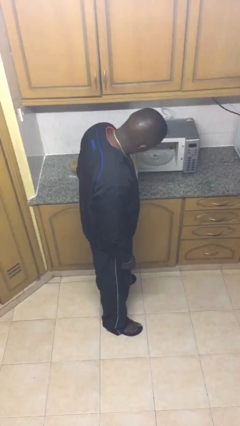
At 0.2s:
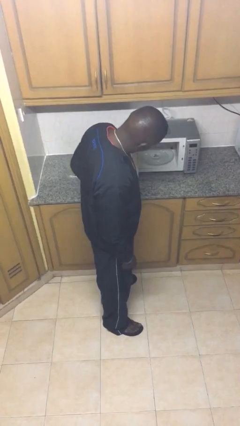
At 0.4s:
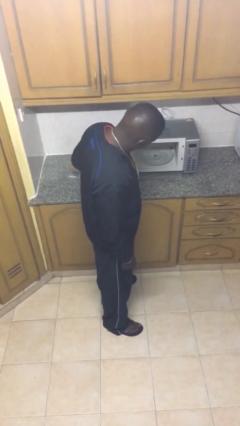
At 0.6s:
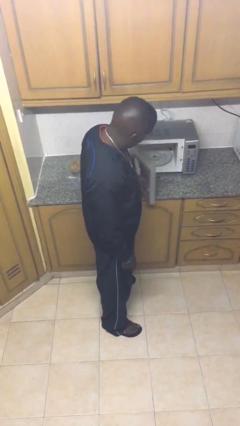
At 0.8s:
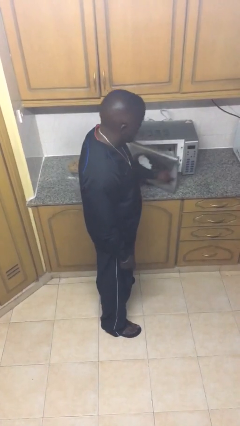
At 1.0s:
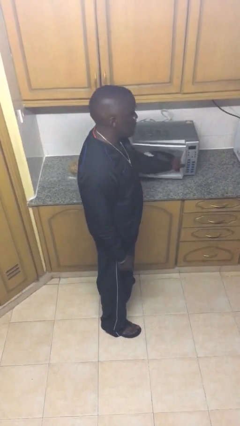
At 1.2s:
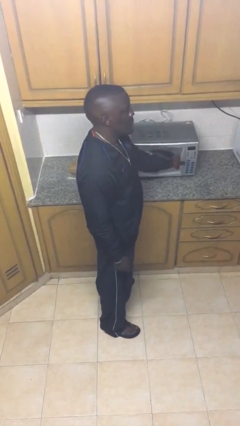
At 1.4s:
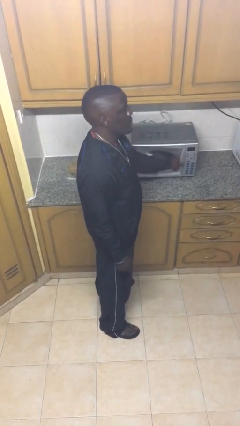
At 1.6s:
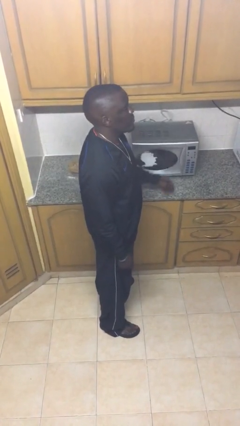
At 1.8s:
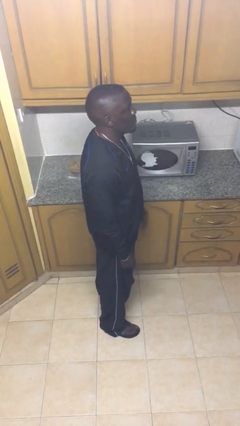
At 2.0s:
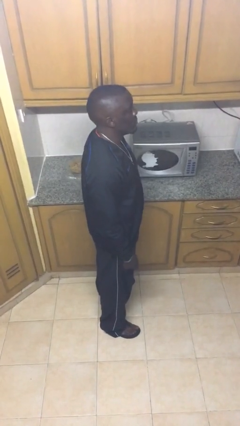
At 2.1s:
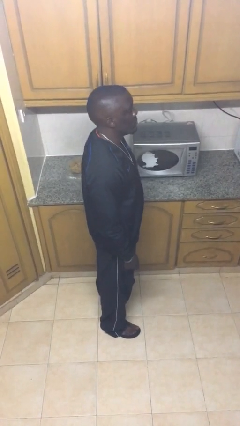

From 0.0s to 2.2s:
person closes microwave

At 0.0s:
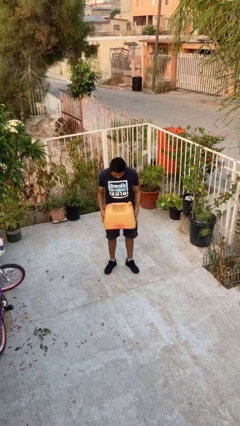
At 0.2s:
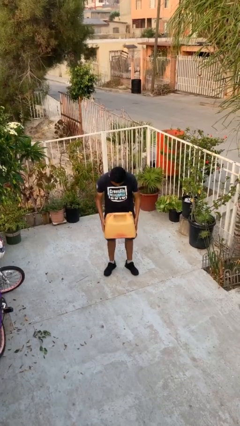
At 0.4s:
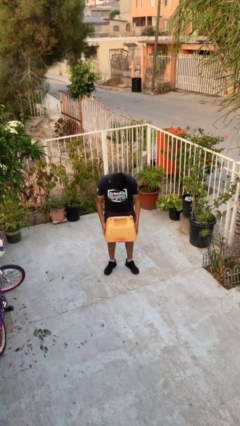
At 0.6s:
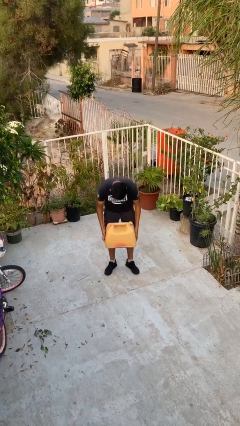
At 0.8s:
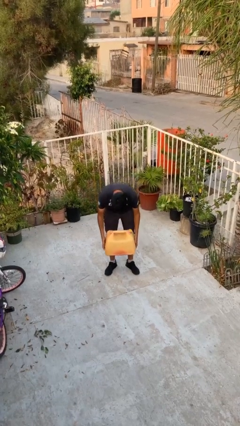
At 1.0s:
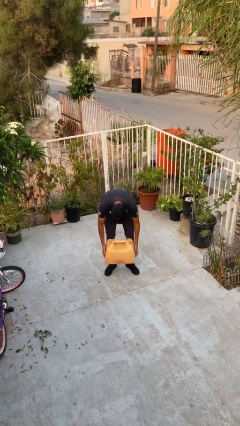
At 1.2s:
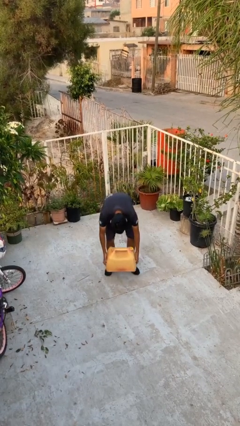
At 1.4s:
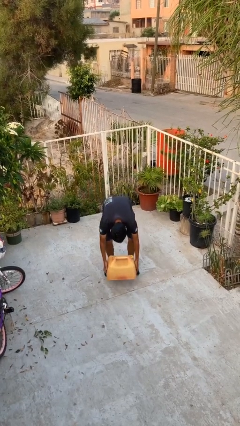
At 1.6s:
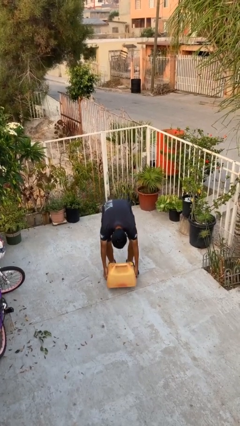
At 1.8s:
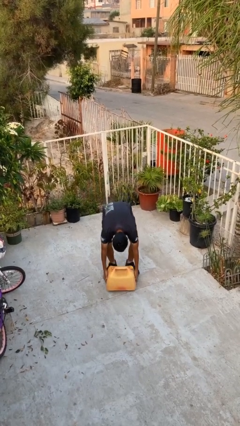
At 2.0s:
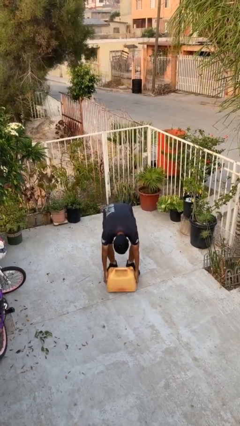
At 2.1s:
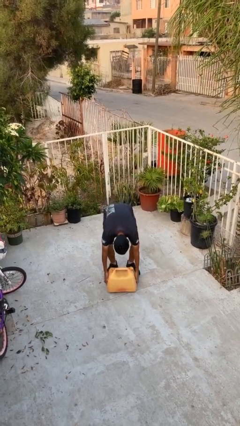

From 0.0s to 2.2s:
person puts down object on floor

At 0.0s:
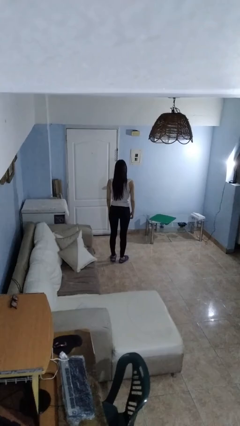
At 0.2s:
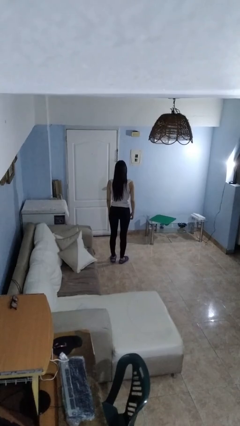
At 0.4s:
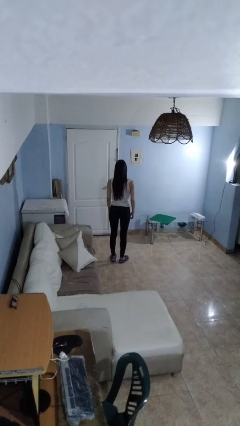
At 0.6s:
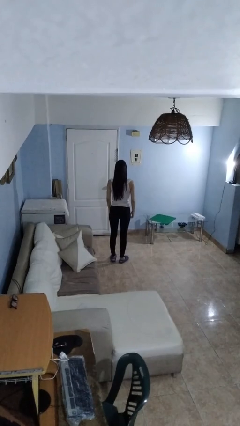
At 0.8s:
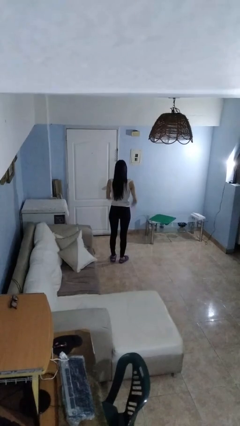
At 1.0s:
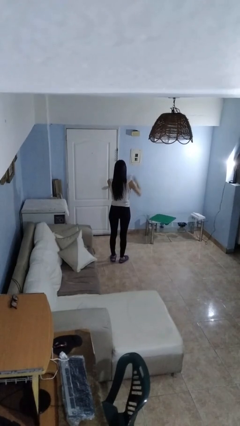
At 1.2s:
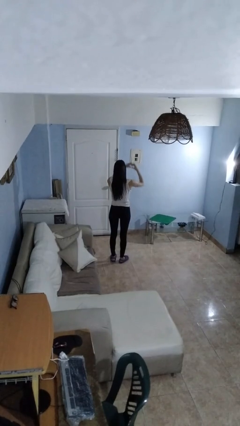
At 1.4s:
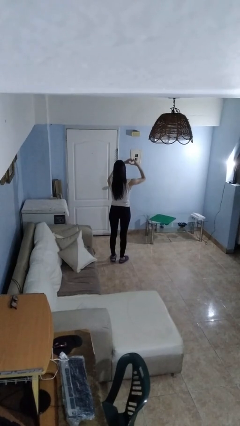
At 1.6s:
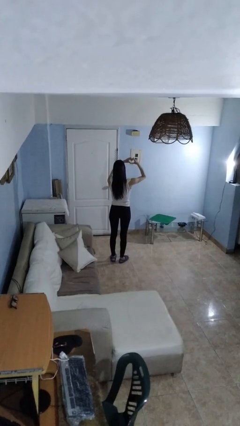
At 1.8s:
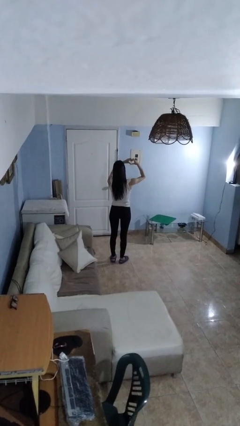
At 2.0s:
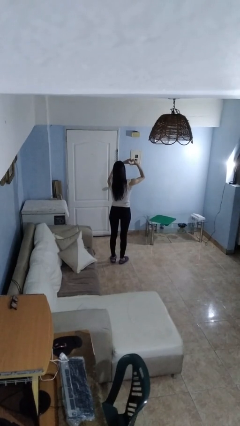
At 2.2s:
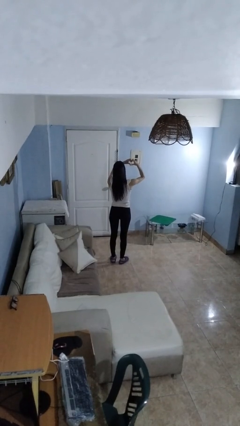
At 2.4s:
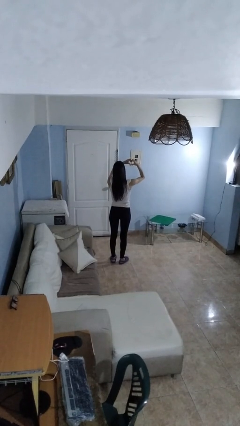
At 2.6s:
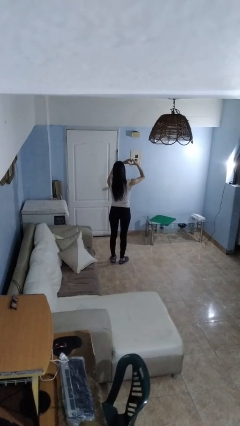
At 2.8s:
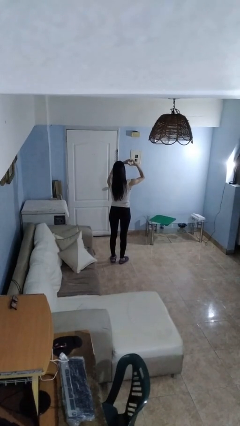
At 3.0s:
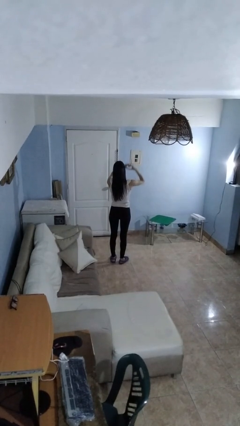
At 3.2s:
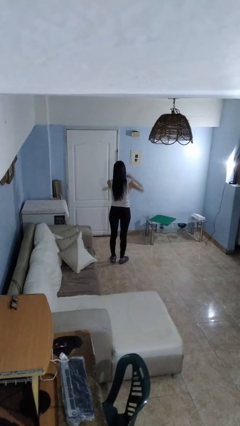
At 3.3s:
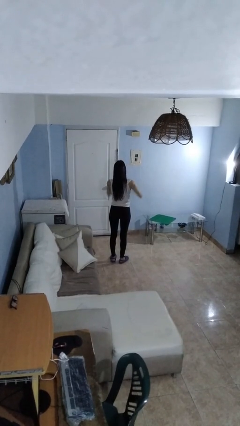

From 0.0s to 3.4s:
person gestures heart

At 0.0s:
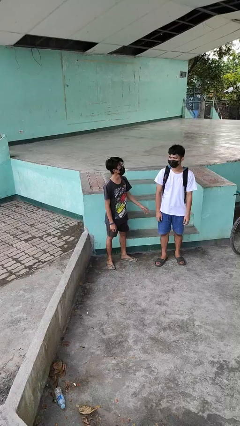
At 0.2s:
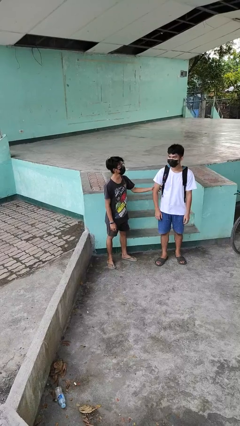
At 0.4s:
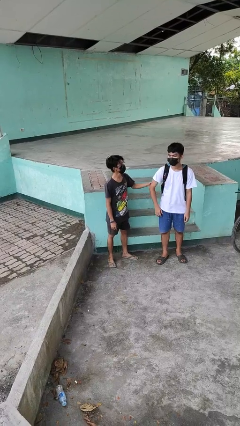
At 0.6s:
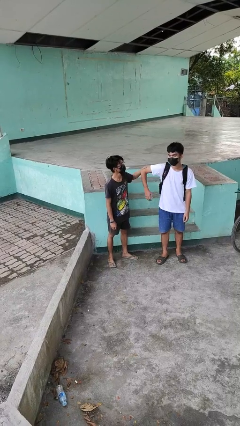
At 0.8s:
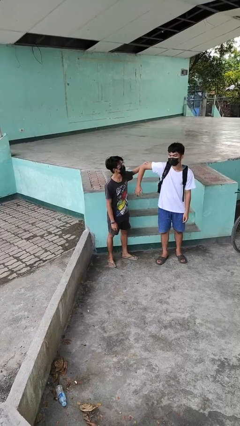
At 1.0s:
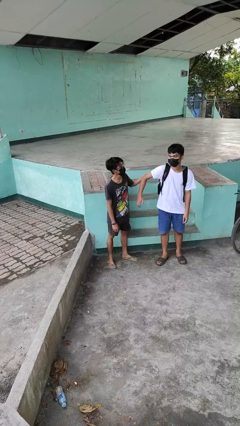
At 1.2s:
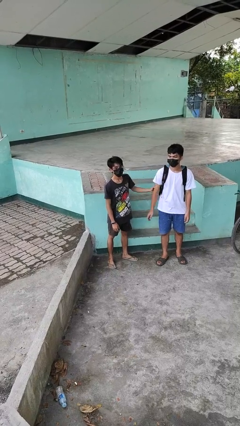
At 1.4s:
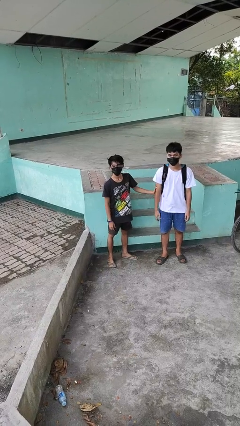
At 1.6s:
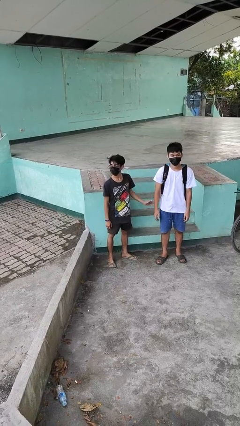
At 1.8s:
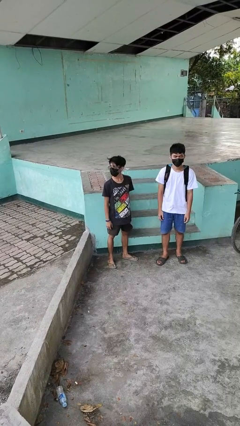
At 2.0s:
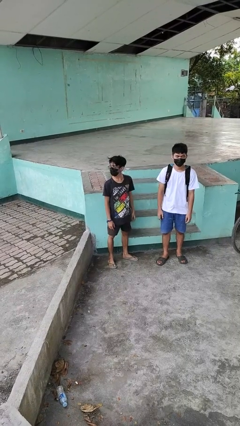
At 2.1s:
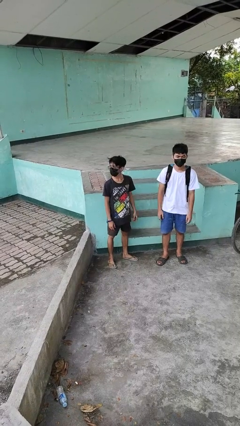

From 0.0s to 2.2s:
person grabs person by bicep

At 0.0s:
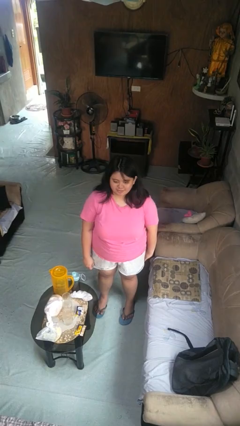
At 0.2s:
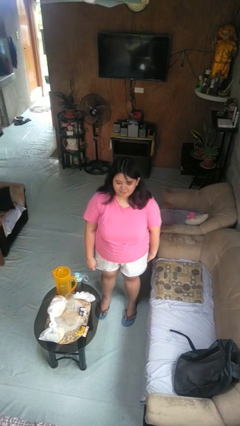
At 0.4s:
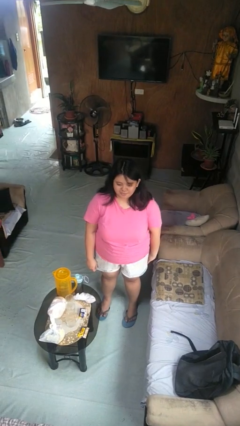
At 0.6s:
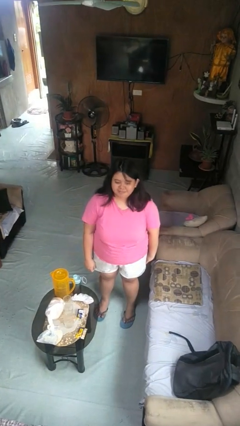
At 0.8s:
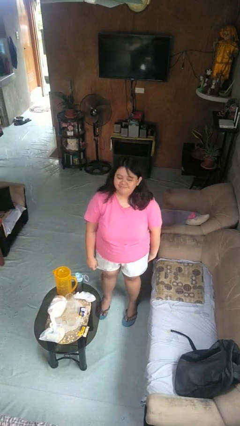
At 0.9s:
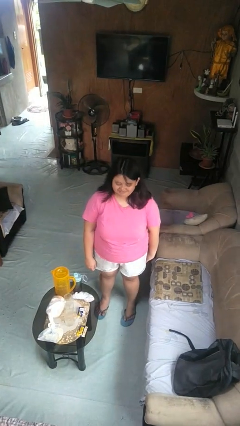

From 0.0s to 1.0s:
person nods head

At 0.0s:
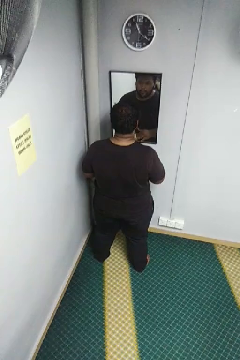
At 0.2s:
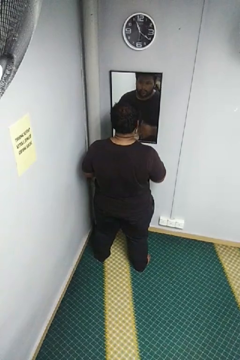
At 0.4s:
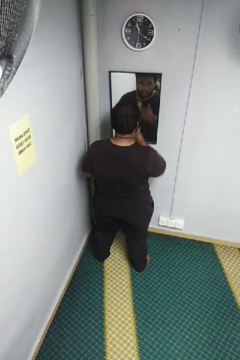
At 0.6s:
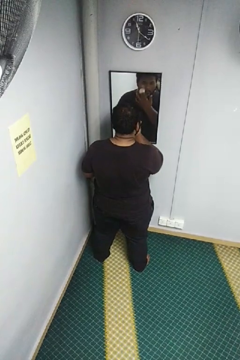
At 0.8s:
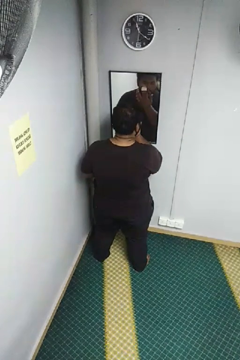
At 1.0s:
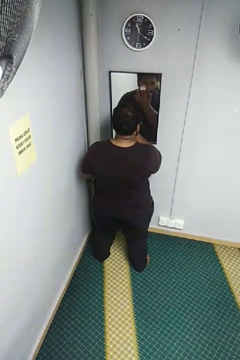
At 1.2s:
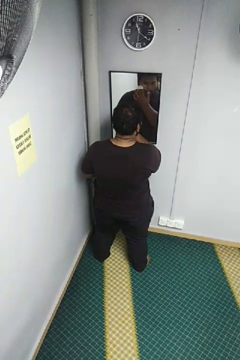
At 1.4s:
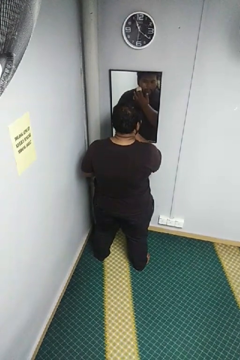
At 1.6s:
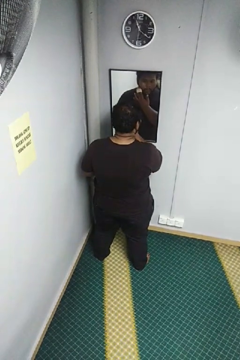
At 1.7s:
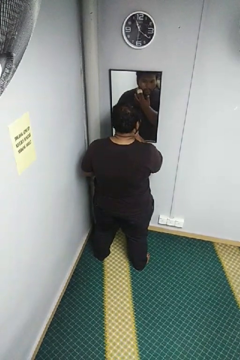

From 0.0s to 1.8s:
person applies foundation makeup

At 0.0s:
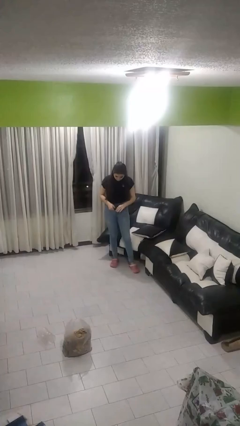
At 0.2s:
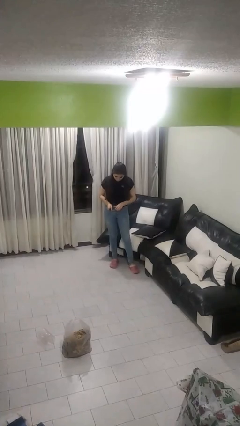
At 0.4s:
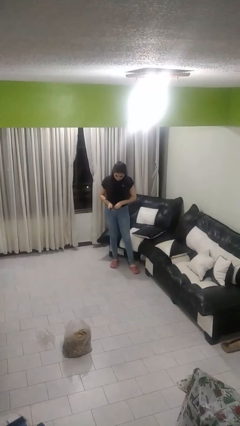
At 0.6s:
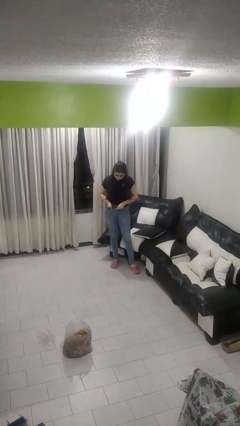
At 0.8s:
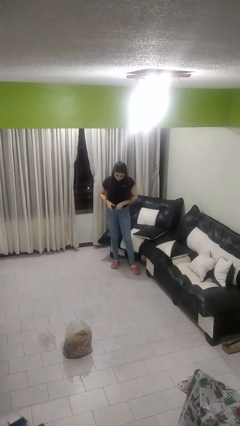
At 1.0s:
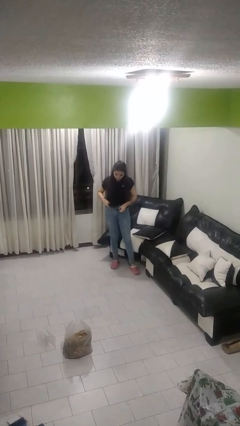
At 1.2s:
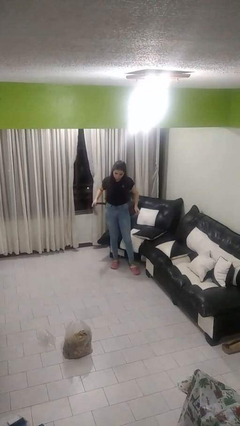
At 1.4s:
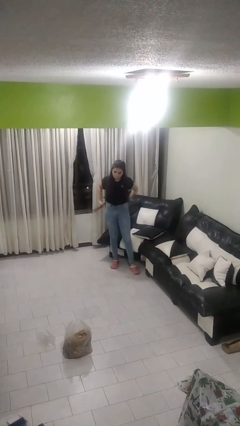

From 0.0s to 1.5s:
person takes off belt

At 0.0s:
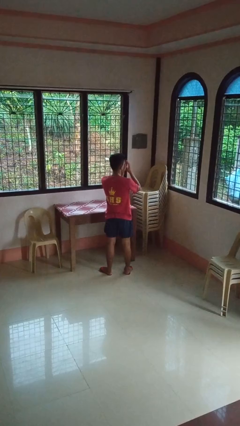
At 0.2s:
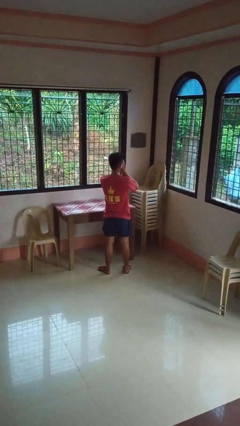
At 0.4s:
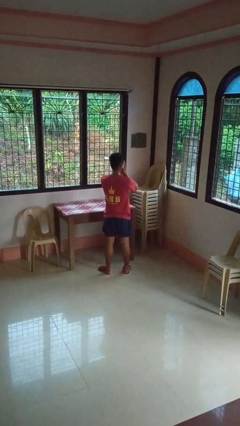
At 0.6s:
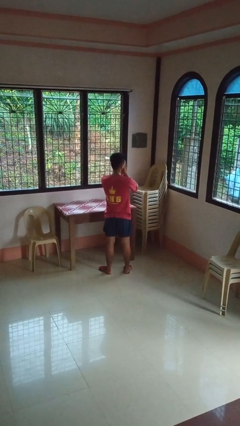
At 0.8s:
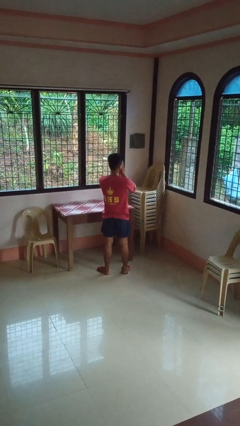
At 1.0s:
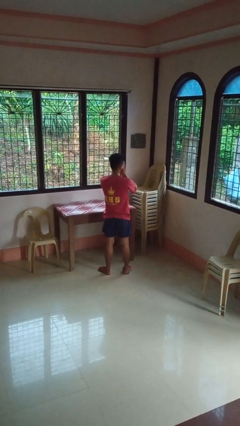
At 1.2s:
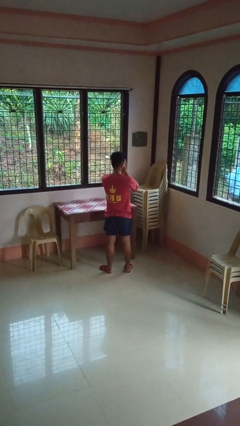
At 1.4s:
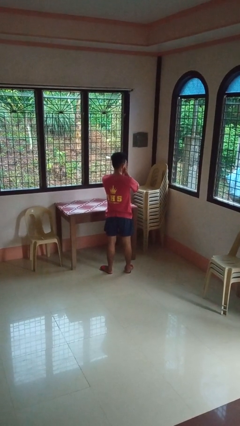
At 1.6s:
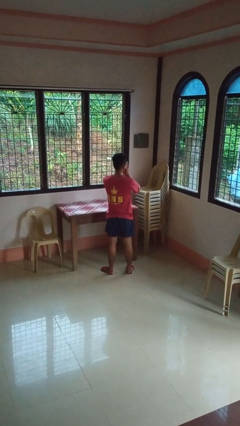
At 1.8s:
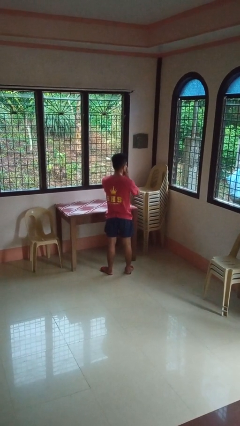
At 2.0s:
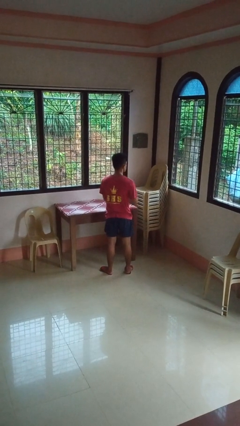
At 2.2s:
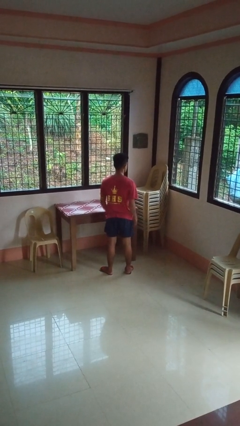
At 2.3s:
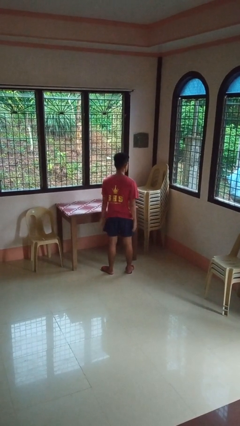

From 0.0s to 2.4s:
person covers face with hands

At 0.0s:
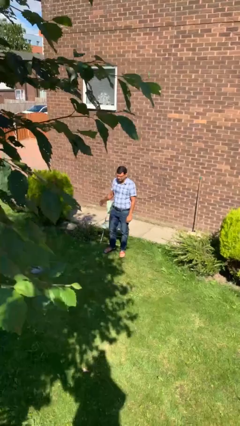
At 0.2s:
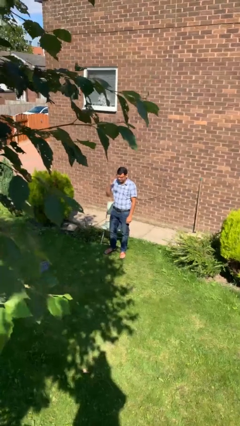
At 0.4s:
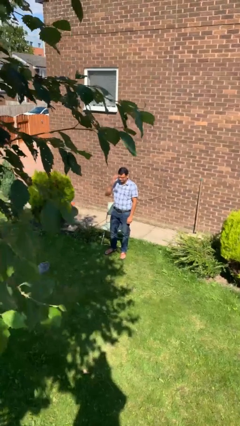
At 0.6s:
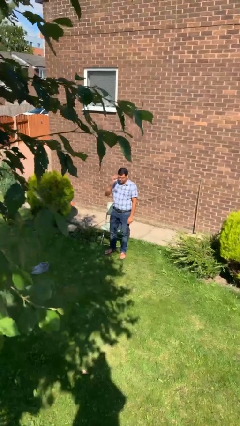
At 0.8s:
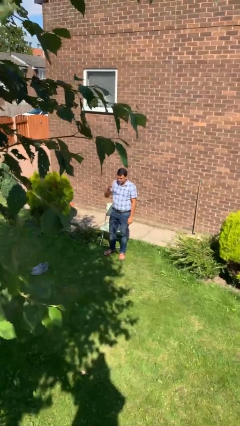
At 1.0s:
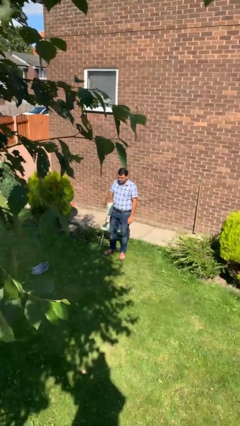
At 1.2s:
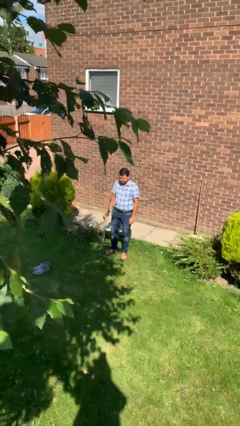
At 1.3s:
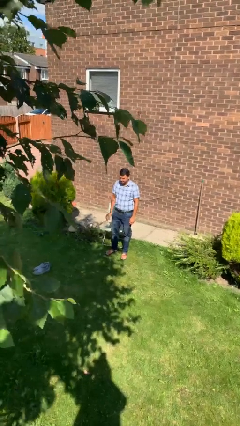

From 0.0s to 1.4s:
person takes off glasses
